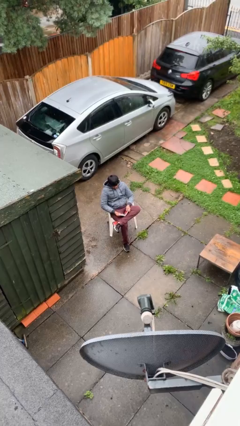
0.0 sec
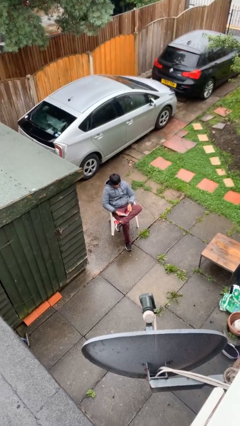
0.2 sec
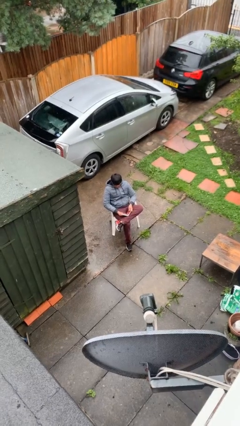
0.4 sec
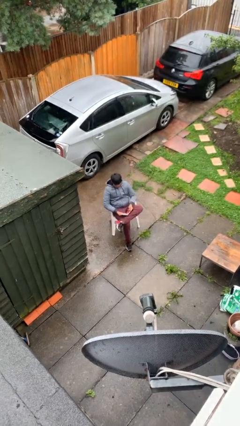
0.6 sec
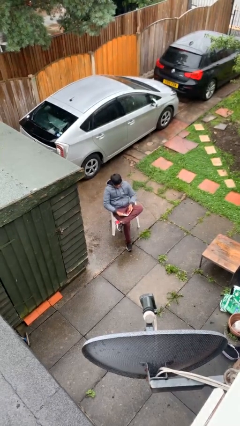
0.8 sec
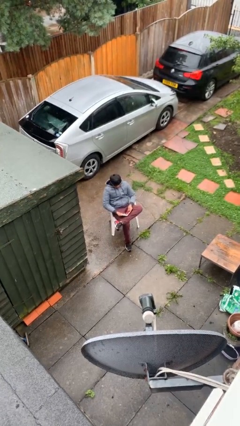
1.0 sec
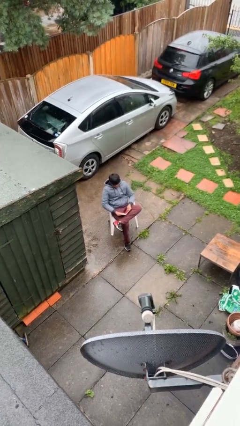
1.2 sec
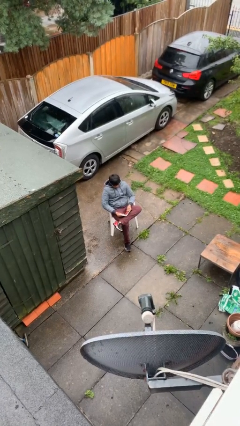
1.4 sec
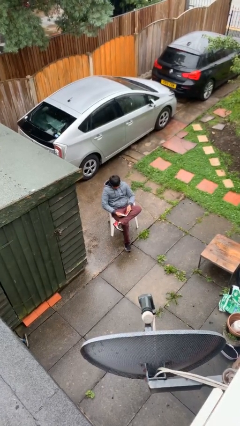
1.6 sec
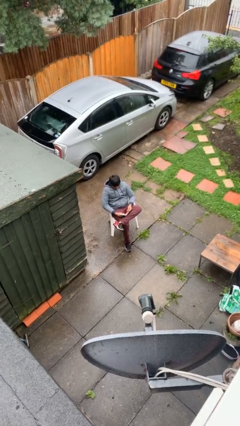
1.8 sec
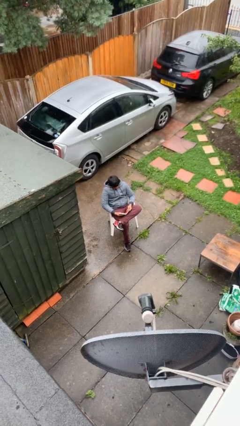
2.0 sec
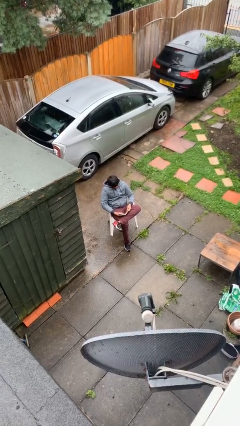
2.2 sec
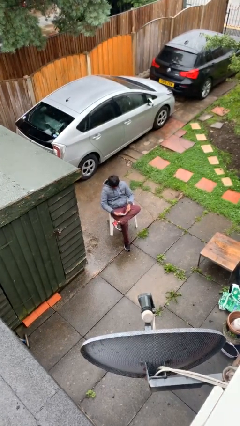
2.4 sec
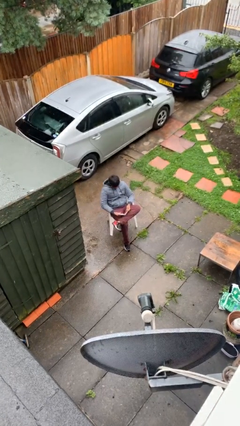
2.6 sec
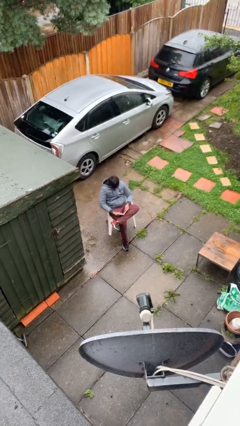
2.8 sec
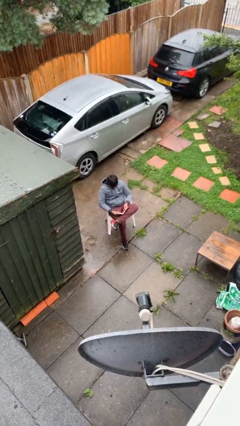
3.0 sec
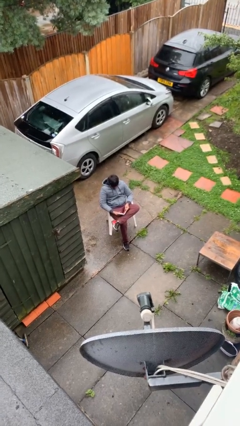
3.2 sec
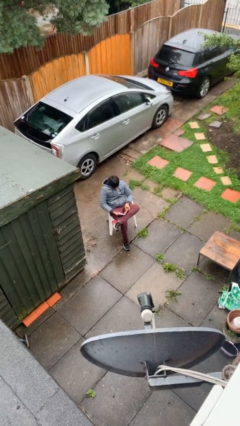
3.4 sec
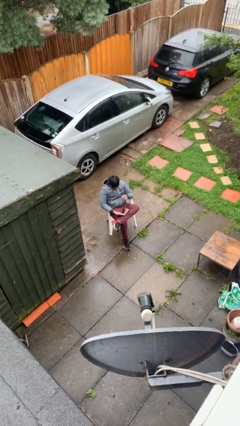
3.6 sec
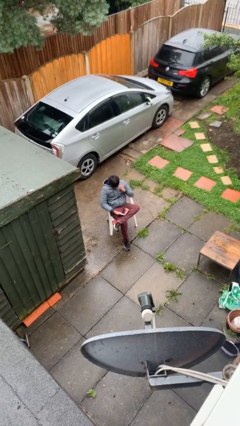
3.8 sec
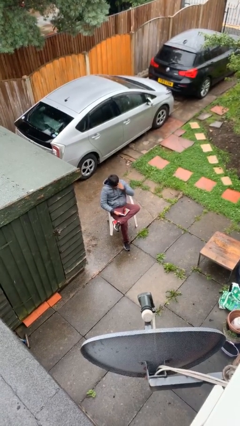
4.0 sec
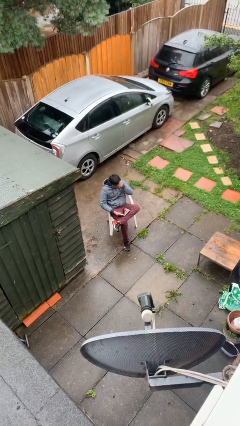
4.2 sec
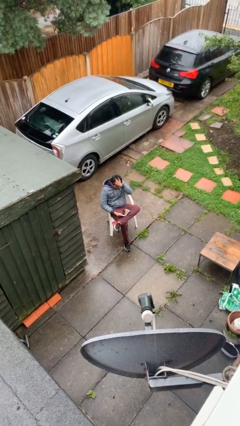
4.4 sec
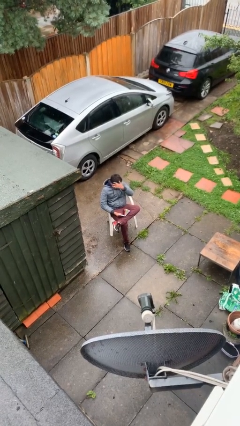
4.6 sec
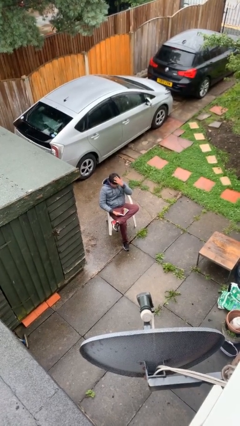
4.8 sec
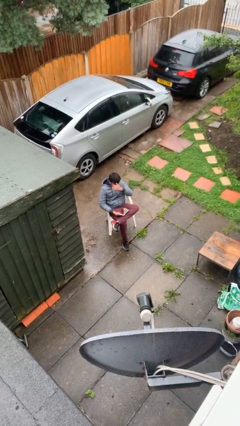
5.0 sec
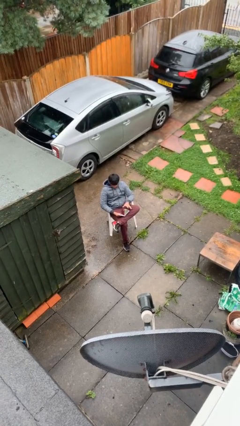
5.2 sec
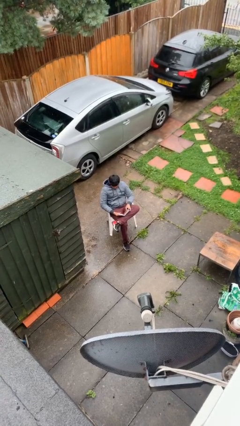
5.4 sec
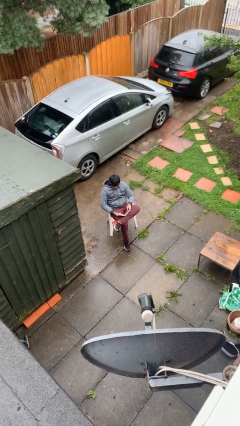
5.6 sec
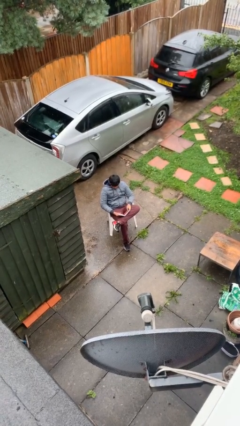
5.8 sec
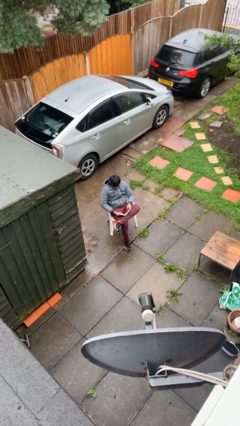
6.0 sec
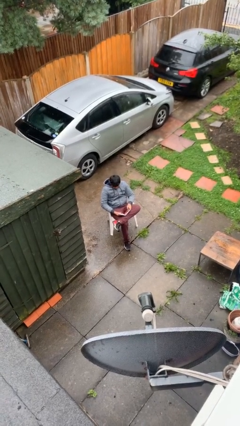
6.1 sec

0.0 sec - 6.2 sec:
person reads document

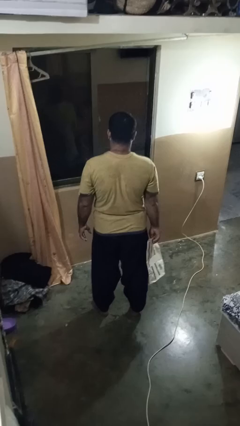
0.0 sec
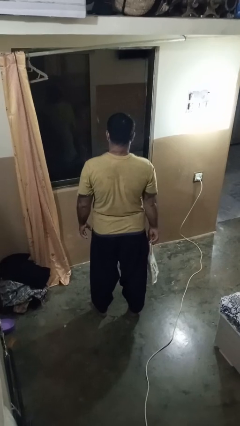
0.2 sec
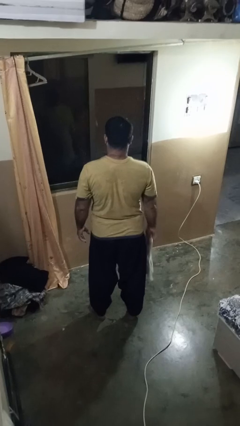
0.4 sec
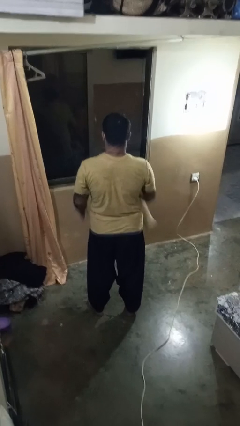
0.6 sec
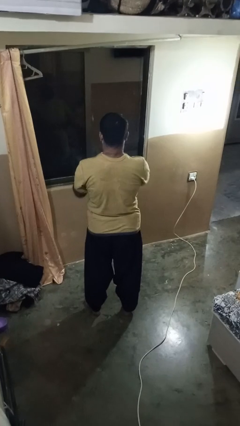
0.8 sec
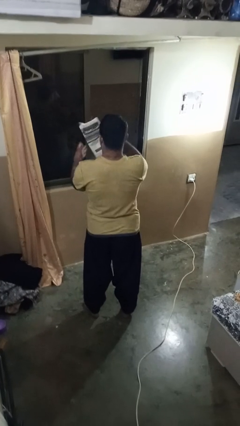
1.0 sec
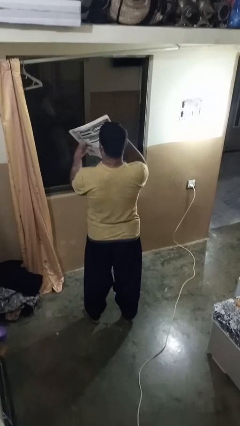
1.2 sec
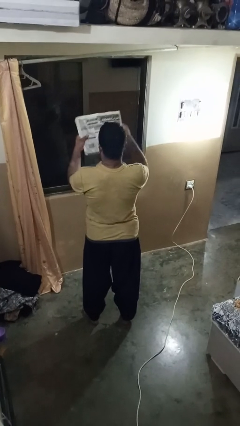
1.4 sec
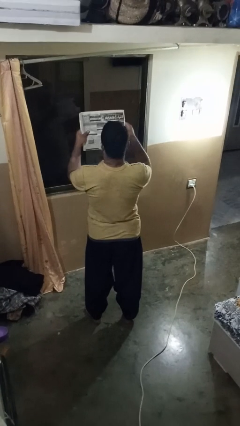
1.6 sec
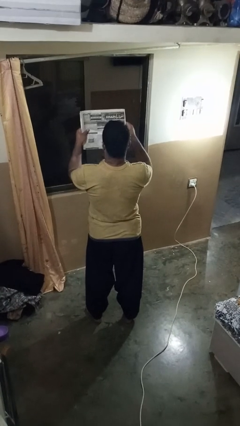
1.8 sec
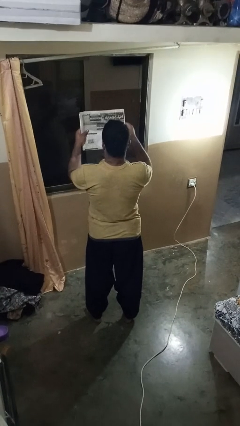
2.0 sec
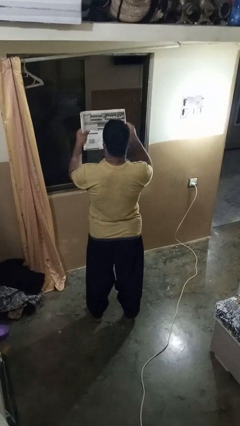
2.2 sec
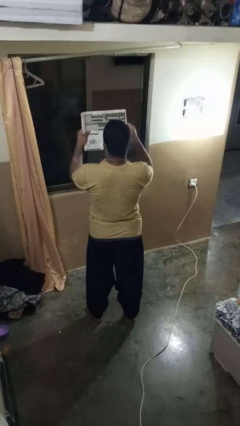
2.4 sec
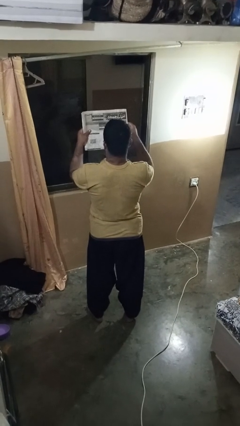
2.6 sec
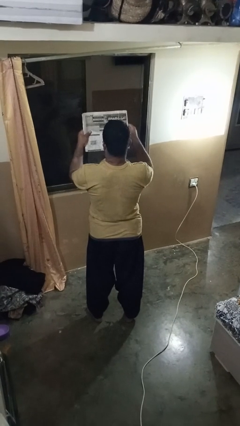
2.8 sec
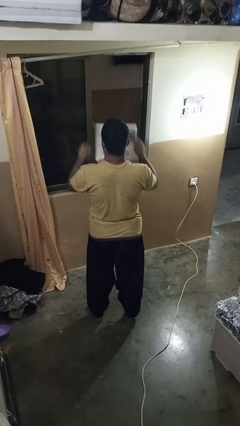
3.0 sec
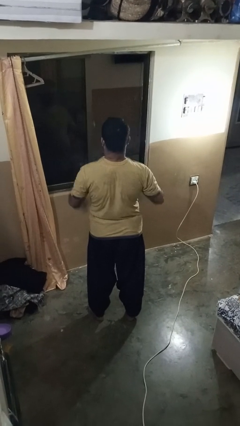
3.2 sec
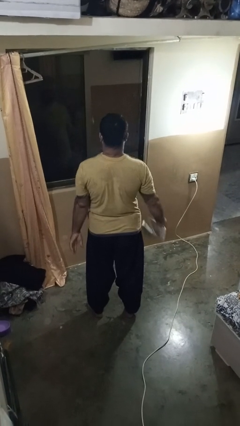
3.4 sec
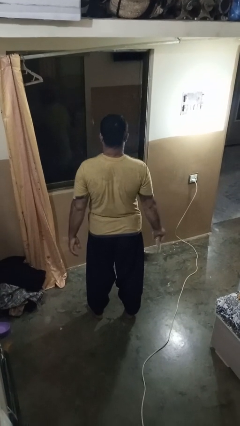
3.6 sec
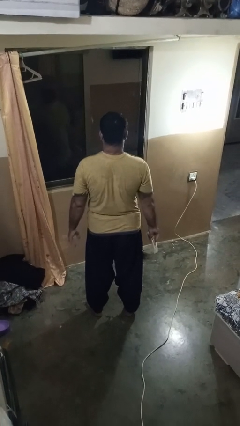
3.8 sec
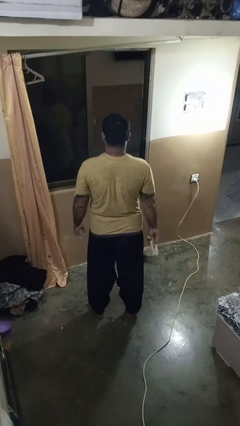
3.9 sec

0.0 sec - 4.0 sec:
person reads newspaper

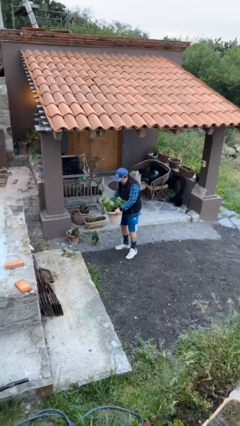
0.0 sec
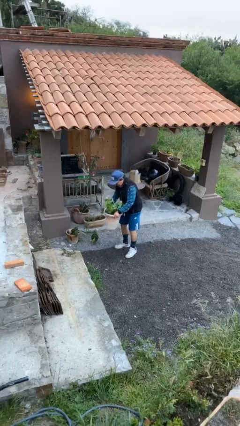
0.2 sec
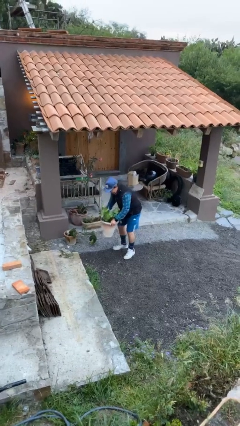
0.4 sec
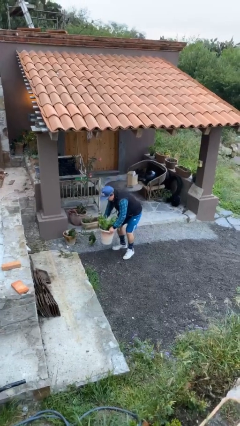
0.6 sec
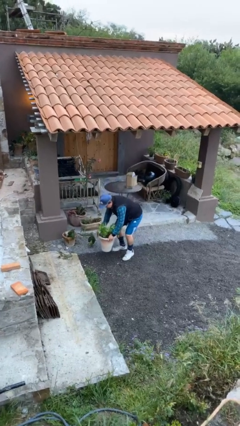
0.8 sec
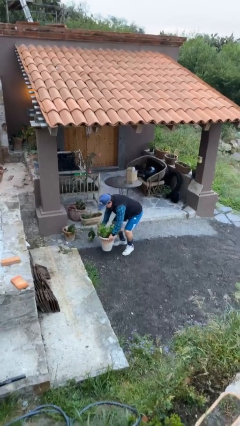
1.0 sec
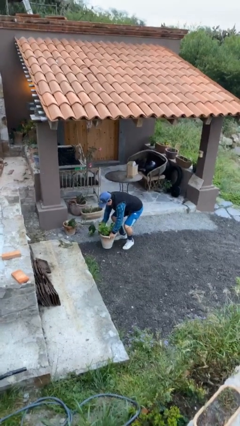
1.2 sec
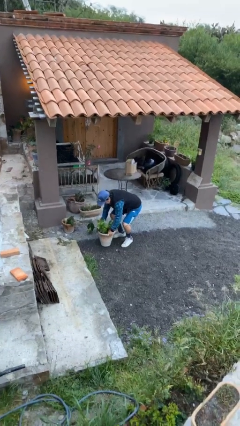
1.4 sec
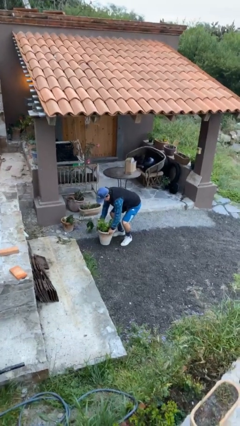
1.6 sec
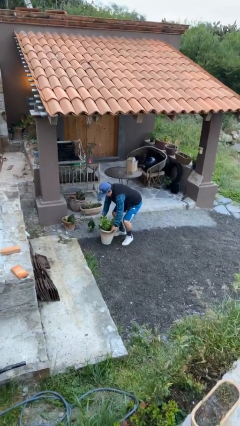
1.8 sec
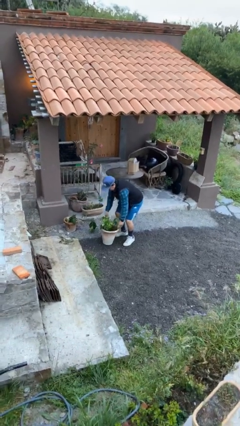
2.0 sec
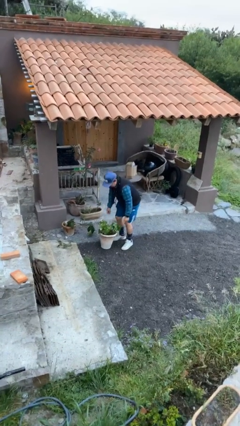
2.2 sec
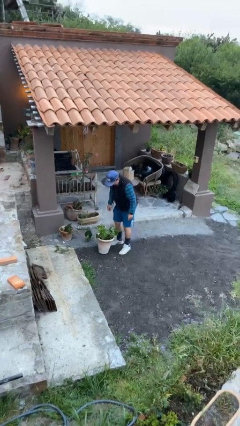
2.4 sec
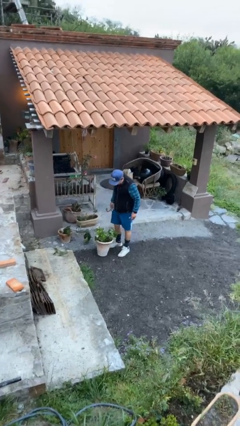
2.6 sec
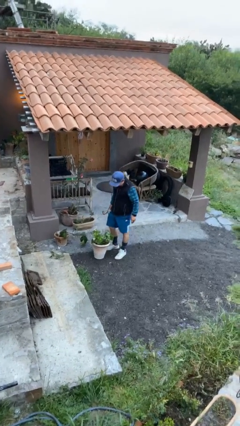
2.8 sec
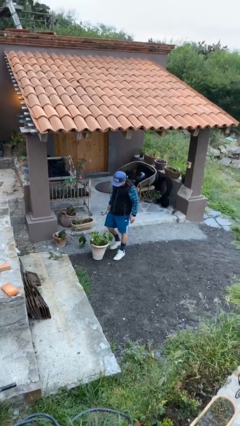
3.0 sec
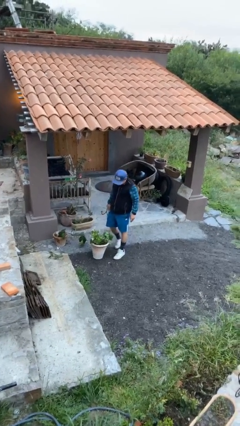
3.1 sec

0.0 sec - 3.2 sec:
person puts down object on floor

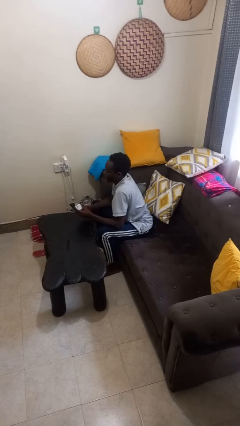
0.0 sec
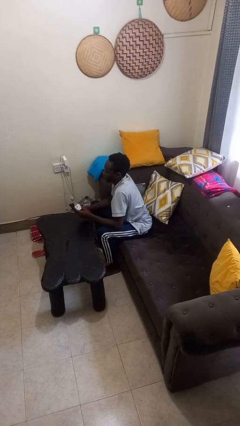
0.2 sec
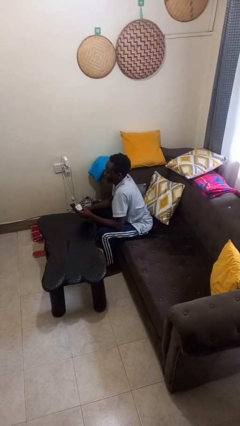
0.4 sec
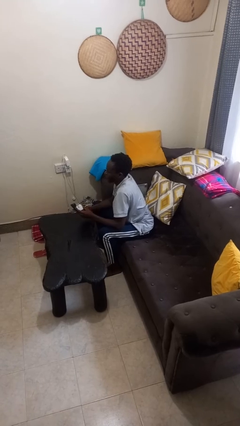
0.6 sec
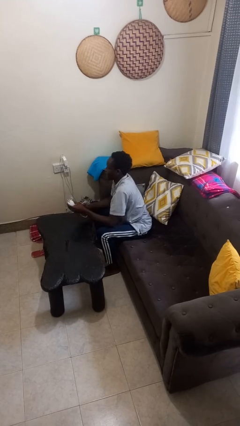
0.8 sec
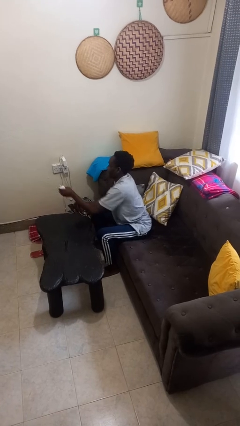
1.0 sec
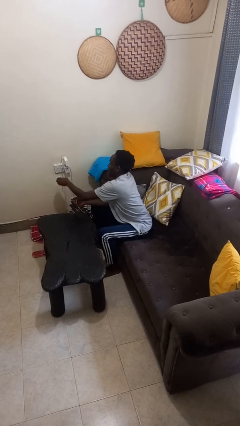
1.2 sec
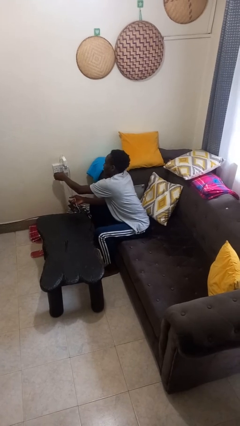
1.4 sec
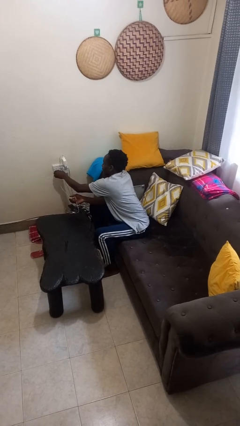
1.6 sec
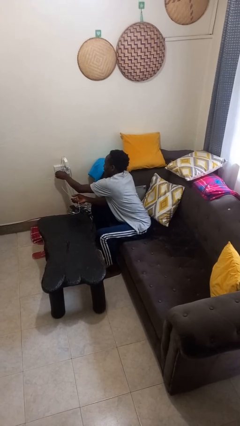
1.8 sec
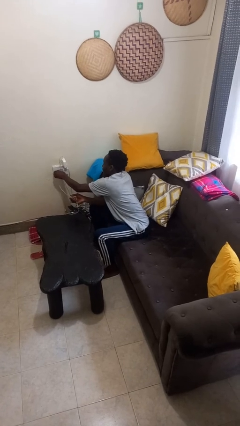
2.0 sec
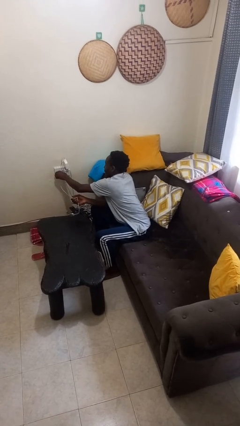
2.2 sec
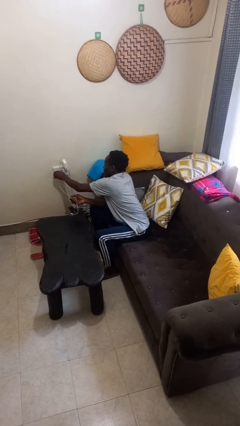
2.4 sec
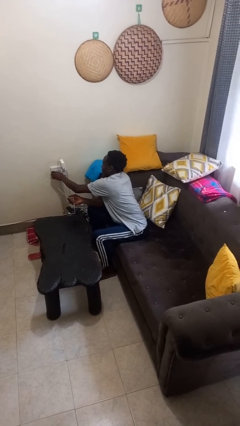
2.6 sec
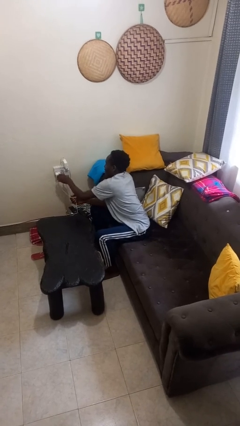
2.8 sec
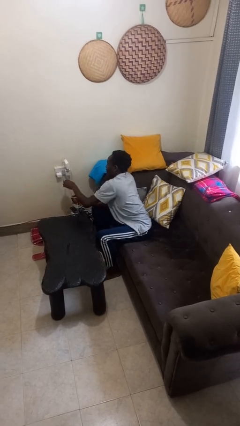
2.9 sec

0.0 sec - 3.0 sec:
person plugs into electrical socket

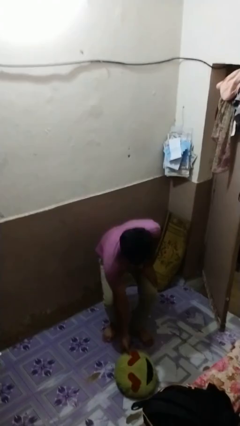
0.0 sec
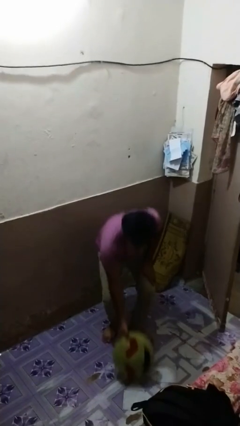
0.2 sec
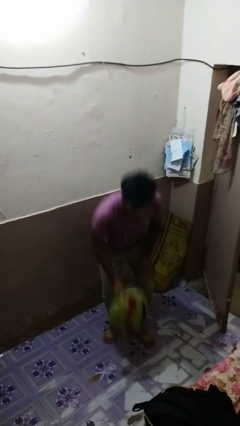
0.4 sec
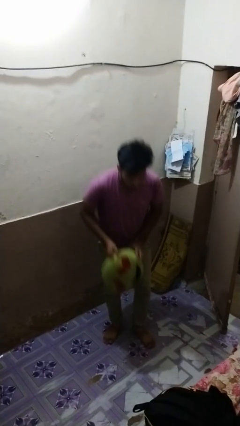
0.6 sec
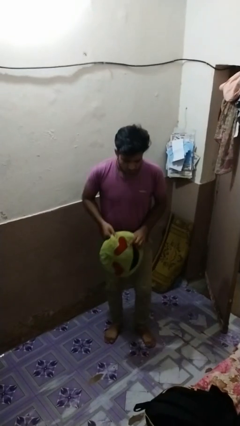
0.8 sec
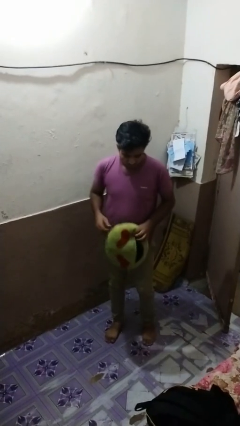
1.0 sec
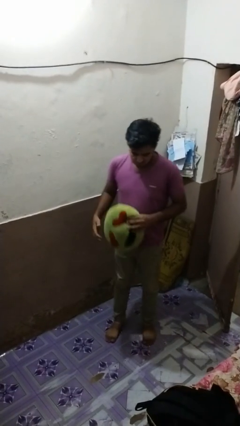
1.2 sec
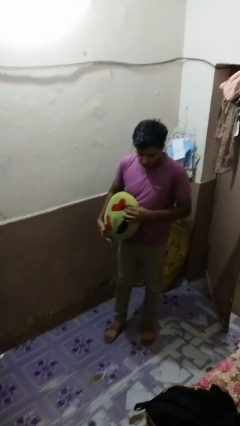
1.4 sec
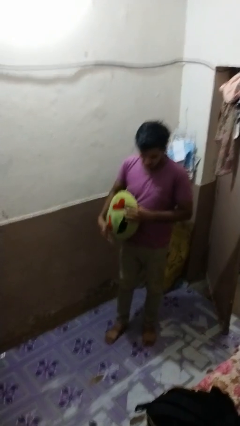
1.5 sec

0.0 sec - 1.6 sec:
person picks up object from floor
